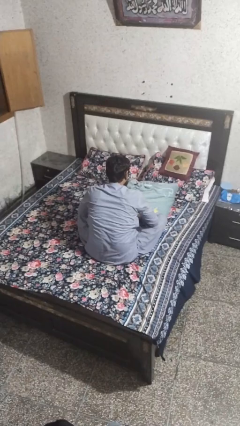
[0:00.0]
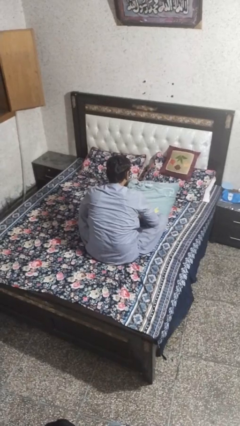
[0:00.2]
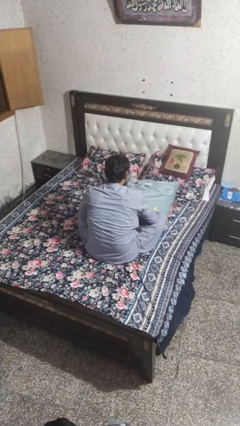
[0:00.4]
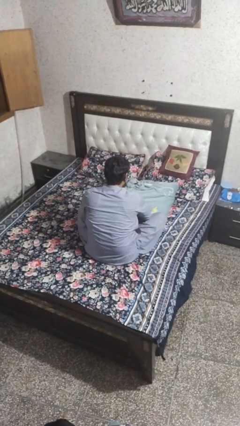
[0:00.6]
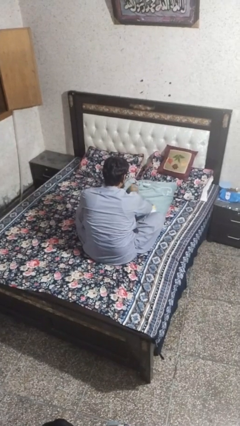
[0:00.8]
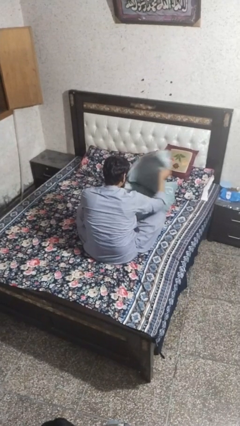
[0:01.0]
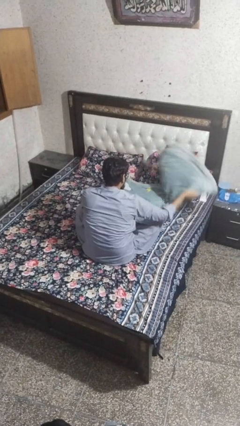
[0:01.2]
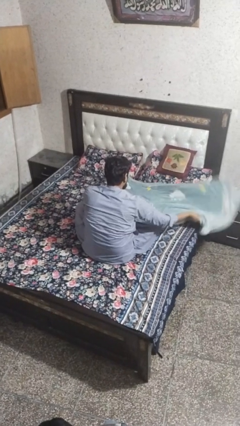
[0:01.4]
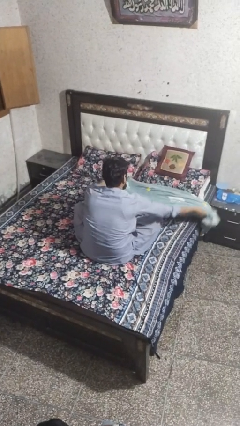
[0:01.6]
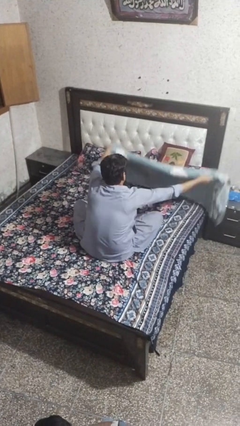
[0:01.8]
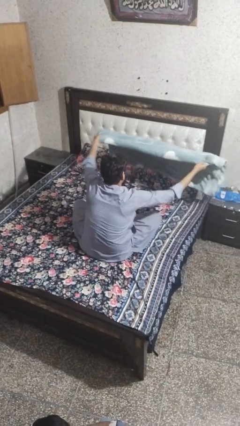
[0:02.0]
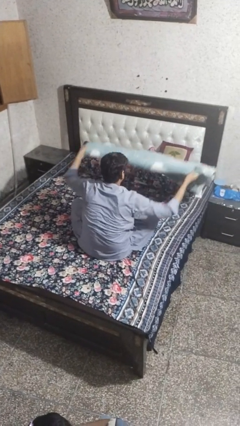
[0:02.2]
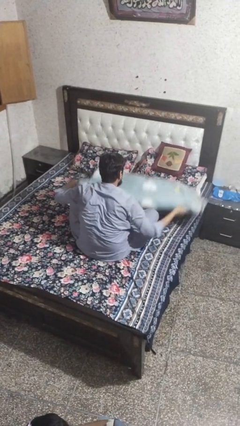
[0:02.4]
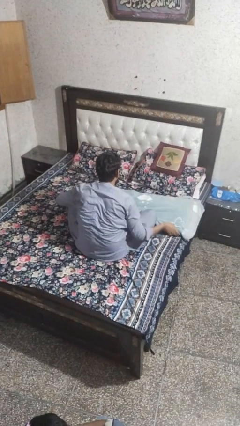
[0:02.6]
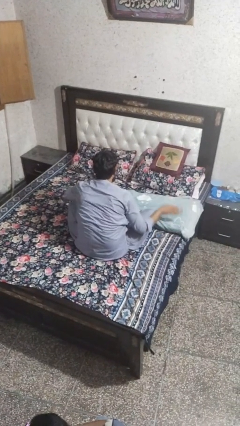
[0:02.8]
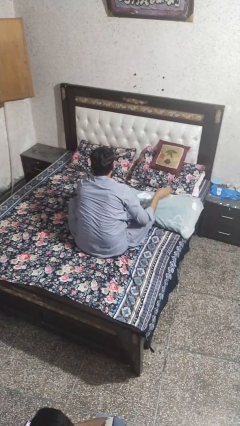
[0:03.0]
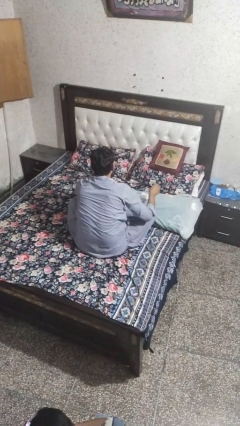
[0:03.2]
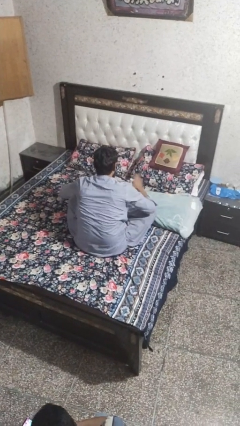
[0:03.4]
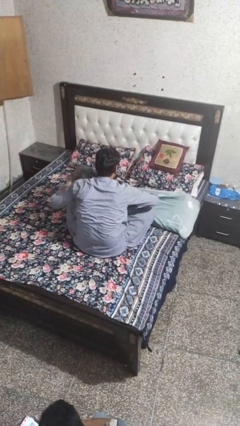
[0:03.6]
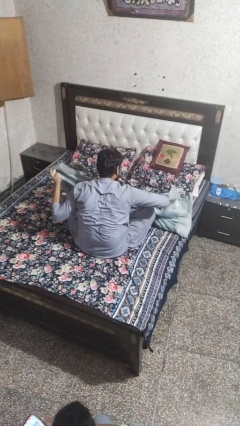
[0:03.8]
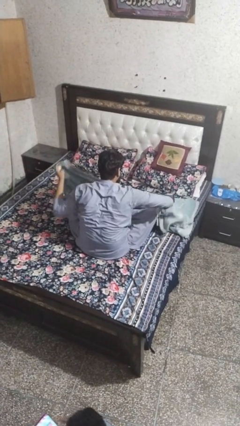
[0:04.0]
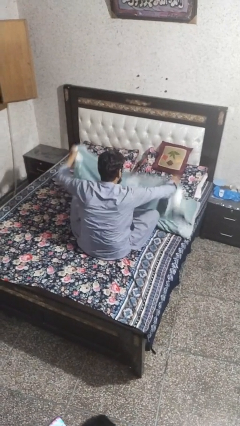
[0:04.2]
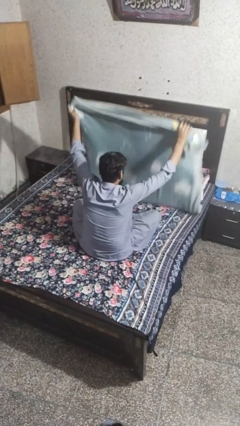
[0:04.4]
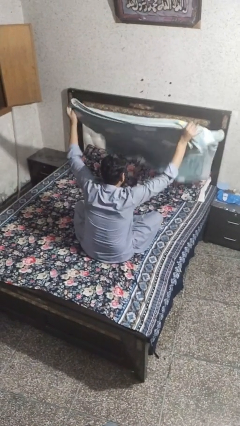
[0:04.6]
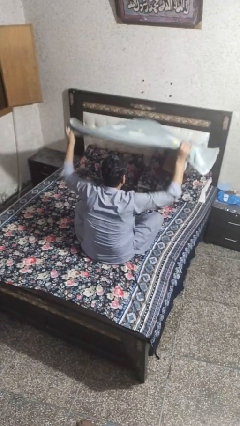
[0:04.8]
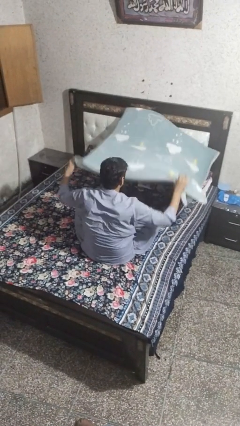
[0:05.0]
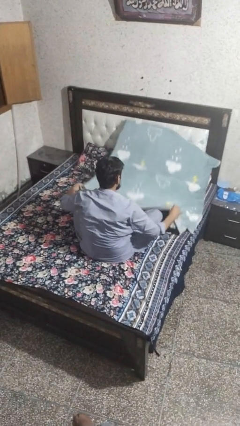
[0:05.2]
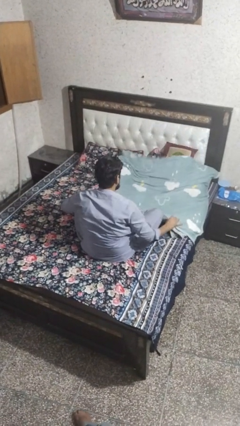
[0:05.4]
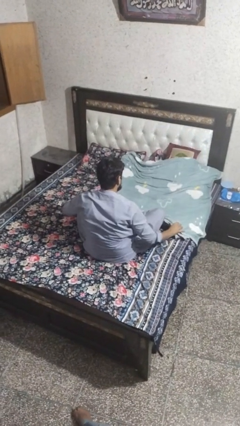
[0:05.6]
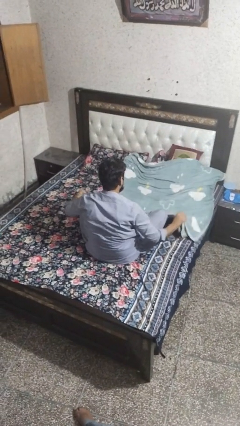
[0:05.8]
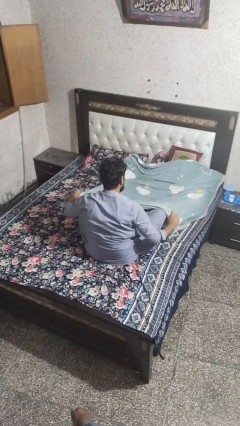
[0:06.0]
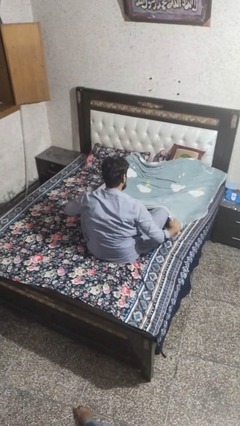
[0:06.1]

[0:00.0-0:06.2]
person unfolds blanket

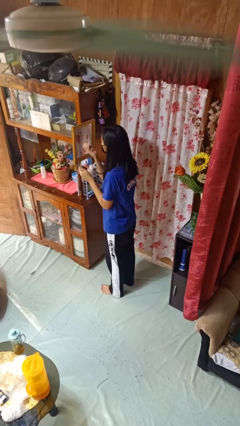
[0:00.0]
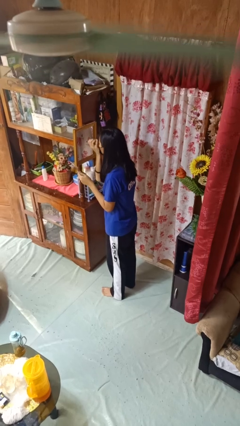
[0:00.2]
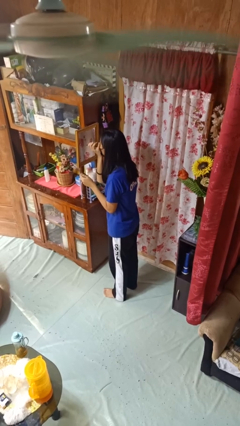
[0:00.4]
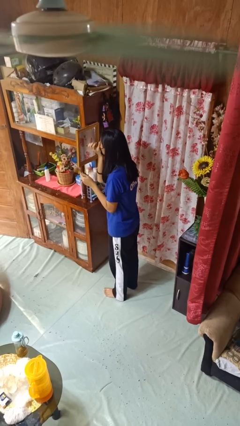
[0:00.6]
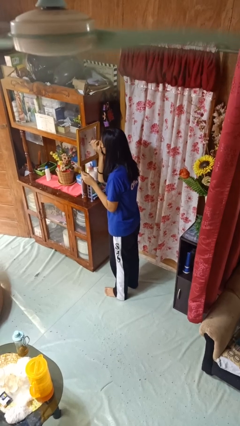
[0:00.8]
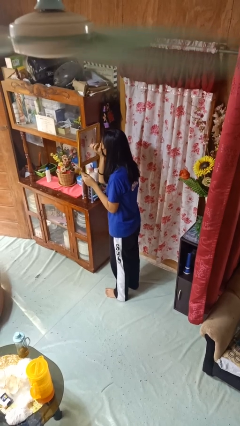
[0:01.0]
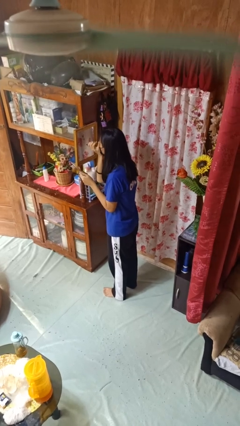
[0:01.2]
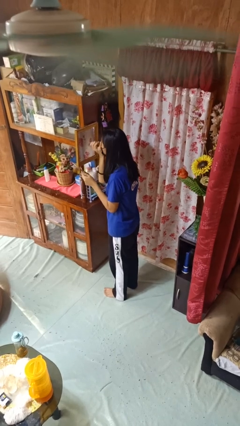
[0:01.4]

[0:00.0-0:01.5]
person applies eye makeup

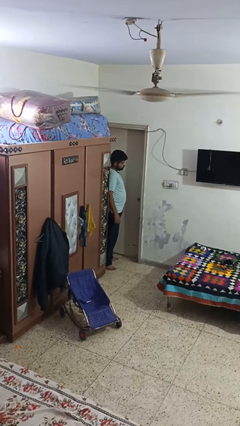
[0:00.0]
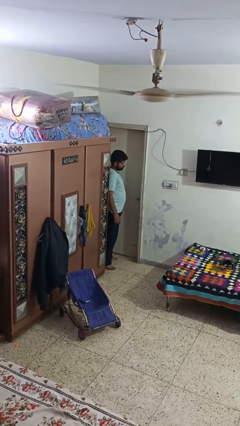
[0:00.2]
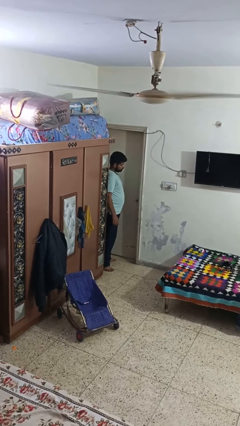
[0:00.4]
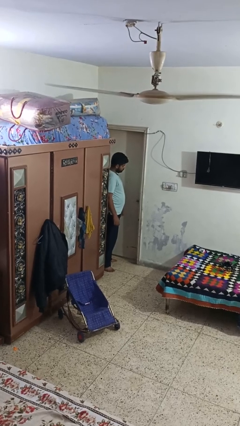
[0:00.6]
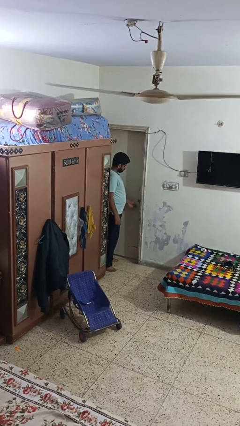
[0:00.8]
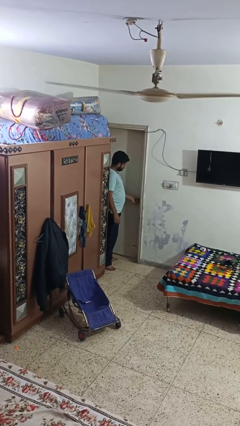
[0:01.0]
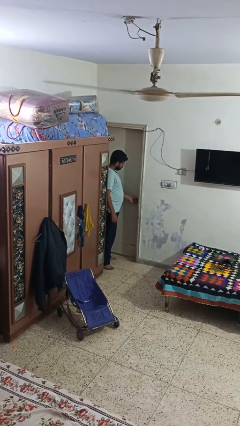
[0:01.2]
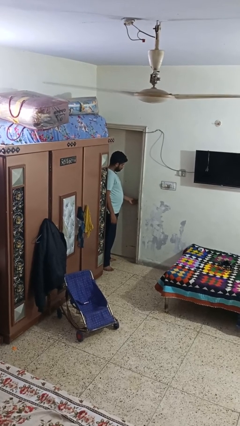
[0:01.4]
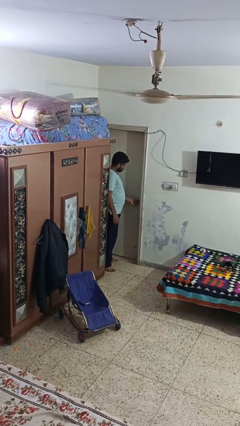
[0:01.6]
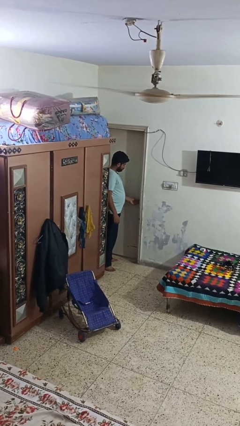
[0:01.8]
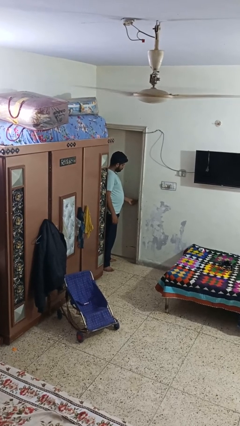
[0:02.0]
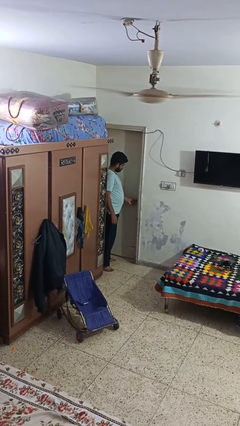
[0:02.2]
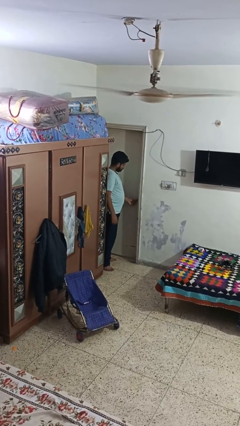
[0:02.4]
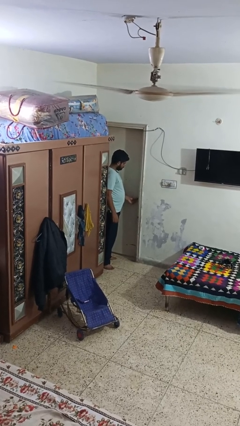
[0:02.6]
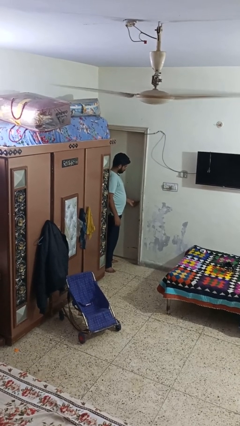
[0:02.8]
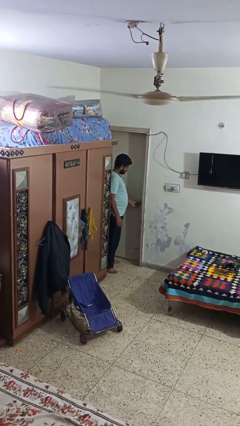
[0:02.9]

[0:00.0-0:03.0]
person unlocks door with keys

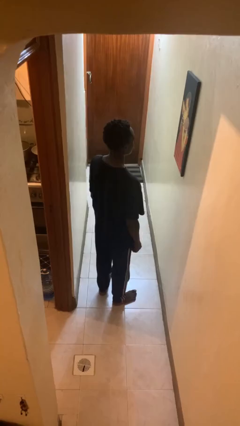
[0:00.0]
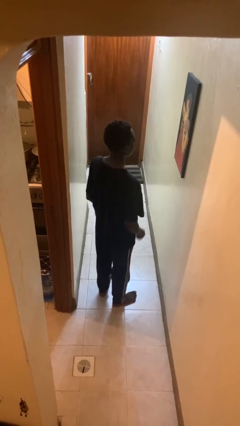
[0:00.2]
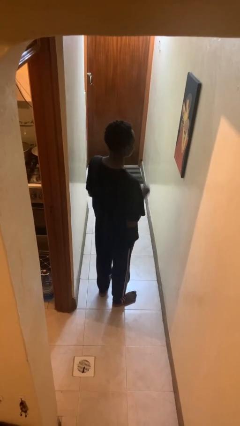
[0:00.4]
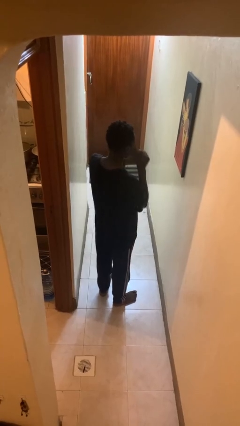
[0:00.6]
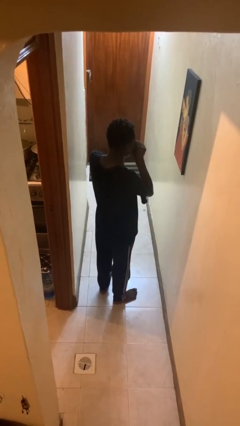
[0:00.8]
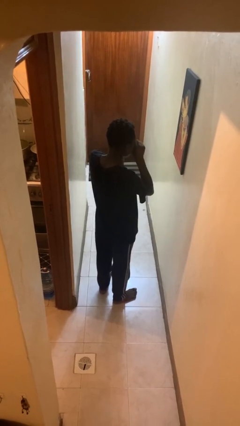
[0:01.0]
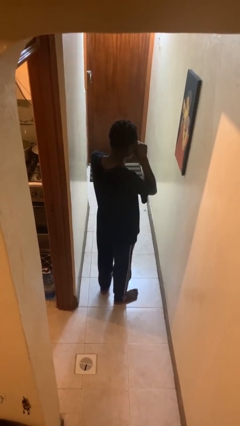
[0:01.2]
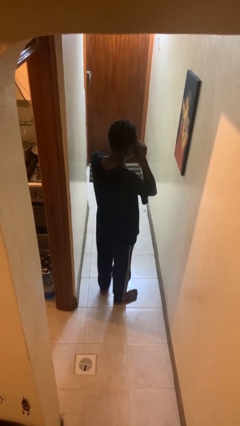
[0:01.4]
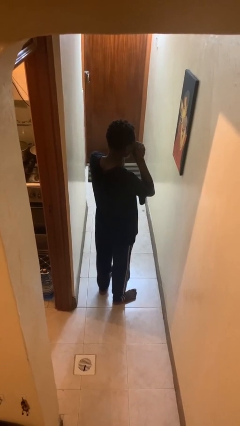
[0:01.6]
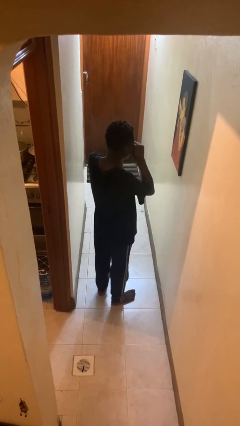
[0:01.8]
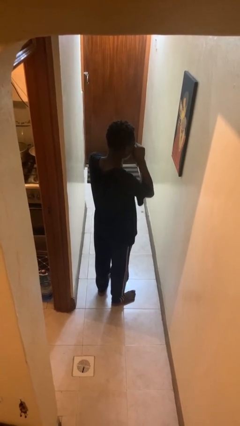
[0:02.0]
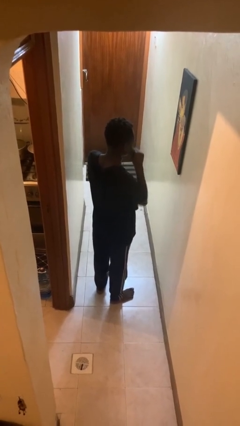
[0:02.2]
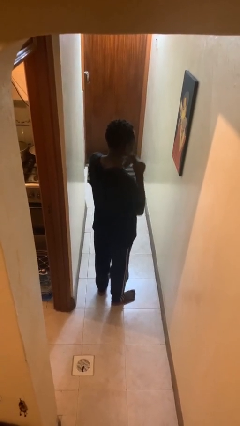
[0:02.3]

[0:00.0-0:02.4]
person rubs eyes

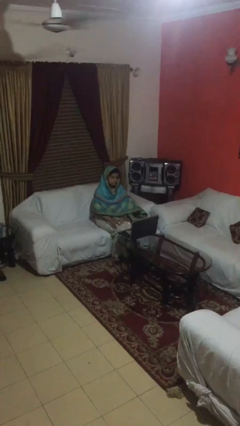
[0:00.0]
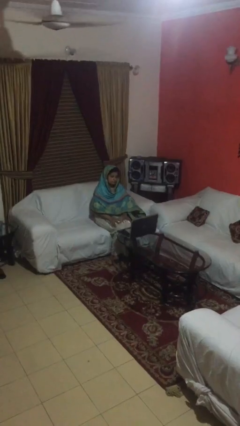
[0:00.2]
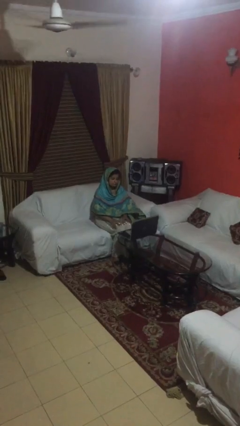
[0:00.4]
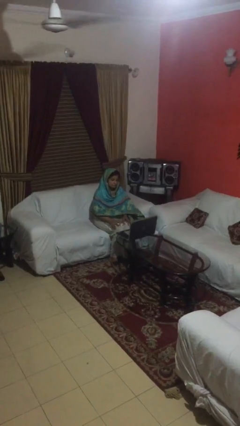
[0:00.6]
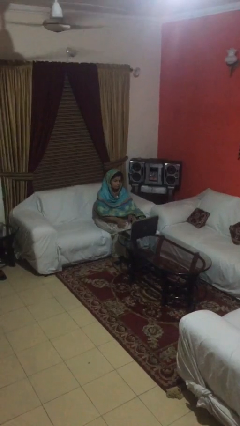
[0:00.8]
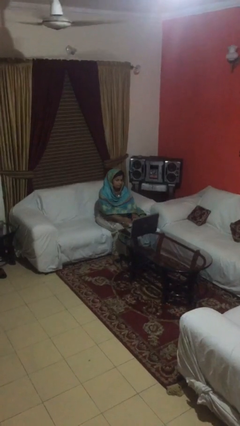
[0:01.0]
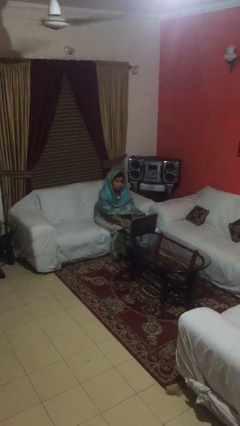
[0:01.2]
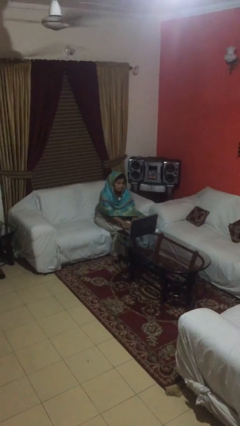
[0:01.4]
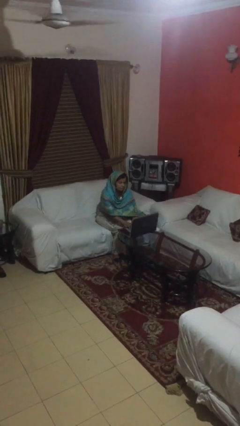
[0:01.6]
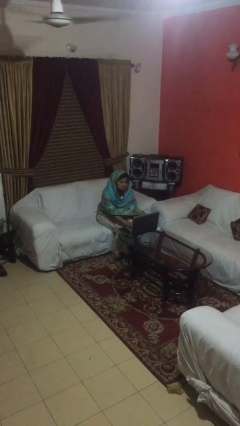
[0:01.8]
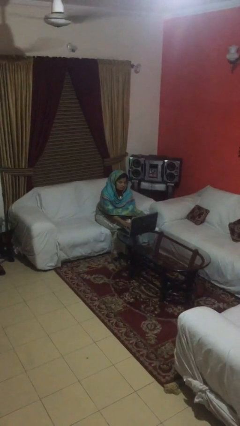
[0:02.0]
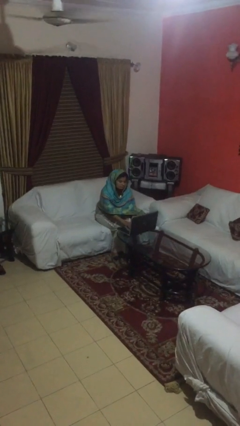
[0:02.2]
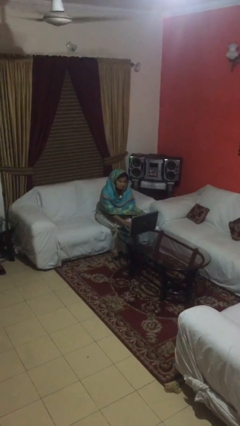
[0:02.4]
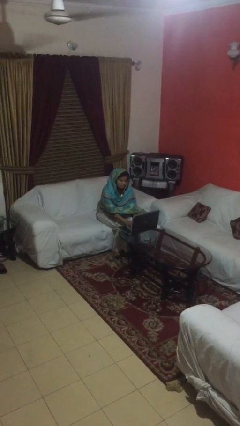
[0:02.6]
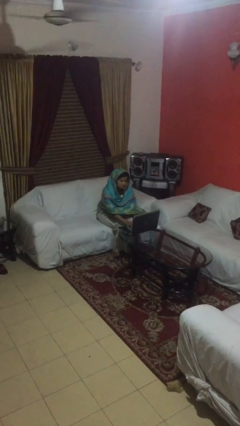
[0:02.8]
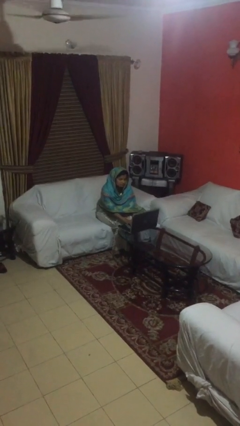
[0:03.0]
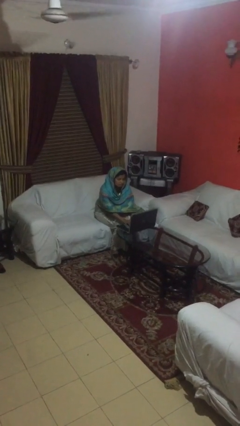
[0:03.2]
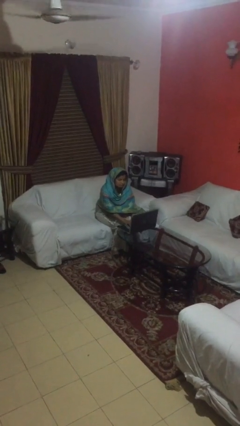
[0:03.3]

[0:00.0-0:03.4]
person interacts with laptop

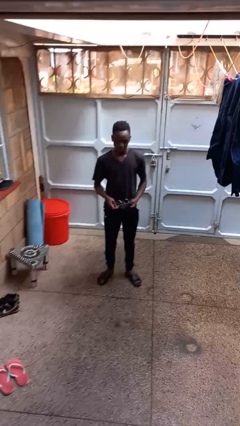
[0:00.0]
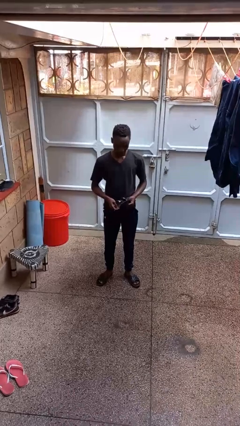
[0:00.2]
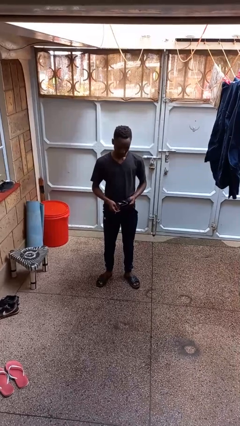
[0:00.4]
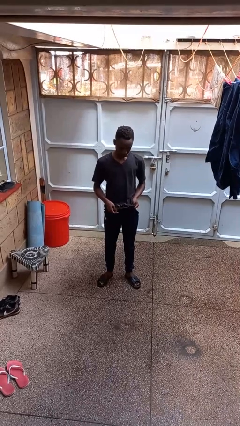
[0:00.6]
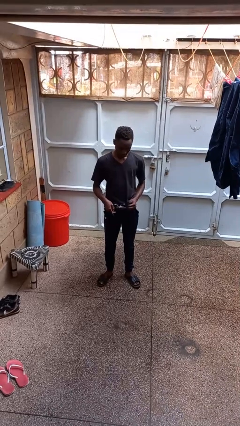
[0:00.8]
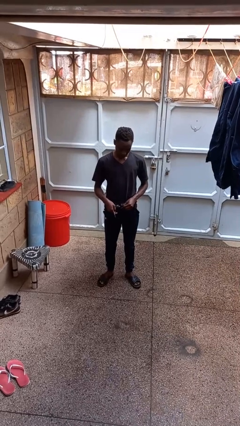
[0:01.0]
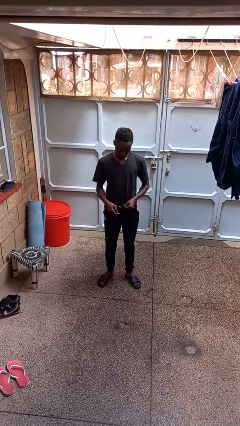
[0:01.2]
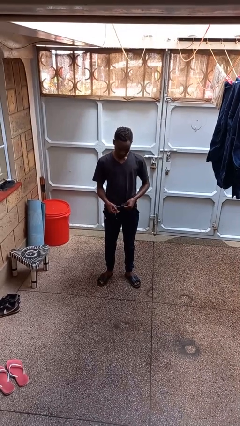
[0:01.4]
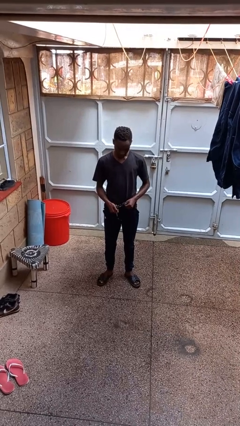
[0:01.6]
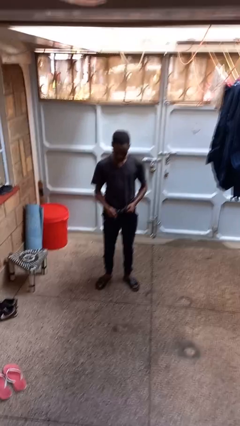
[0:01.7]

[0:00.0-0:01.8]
person cleans eyeglasses
